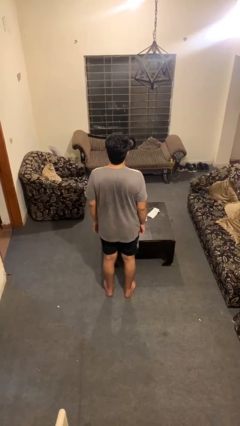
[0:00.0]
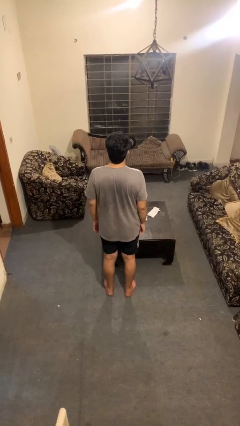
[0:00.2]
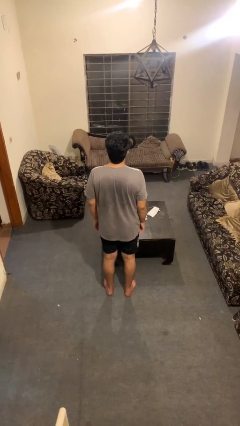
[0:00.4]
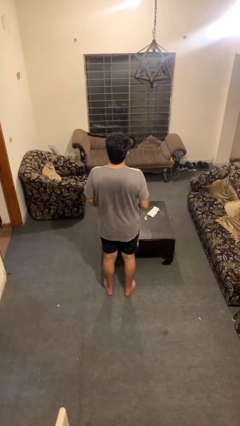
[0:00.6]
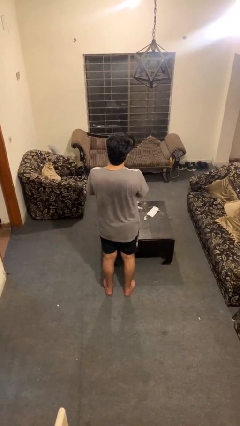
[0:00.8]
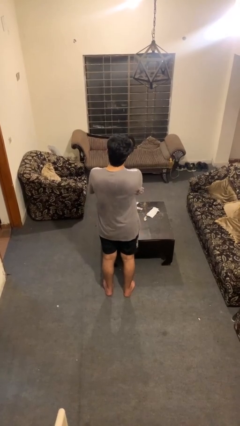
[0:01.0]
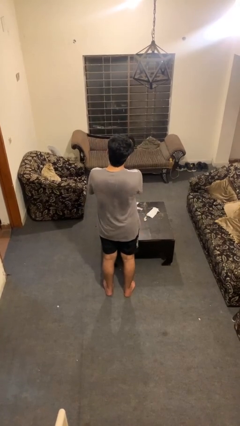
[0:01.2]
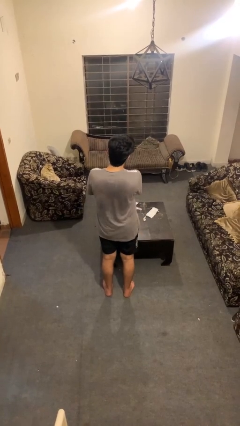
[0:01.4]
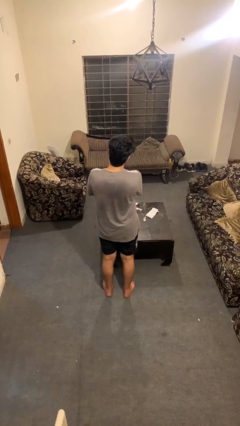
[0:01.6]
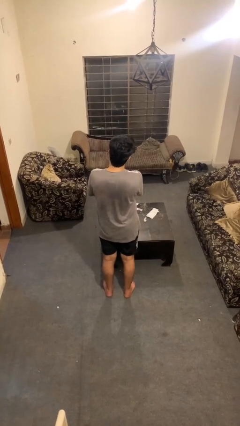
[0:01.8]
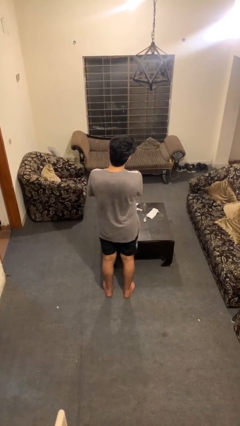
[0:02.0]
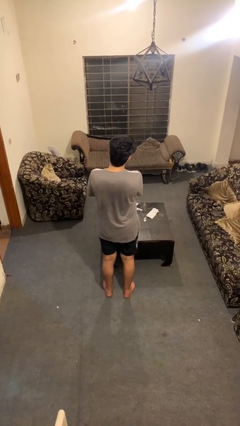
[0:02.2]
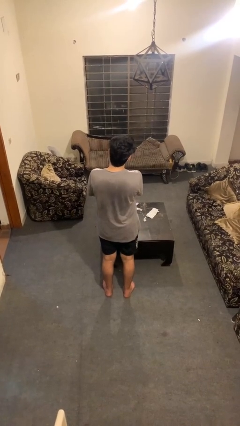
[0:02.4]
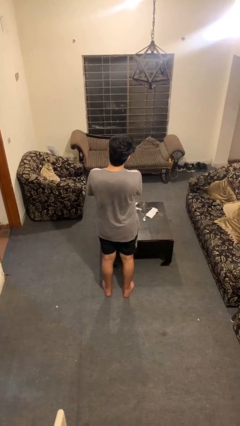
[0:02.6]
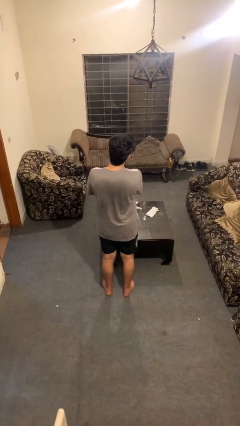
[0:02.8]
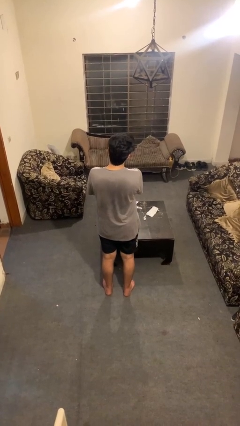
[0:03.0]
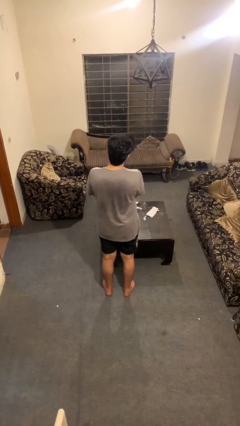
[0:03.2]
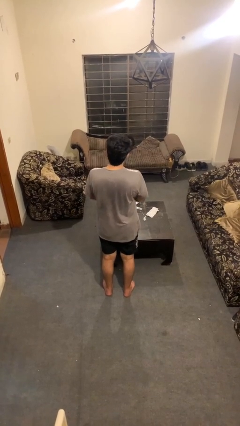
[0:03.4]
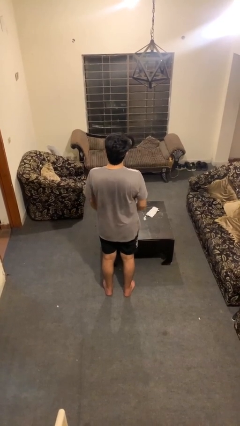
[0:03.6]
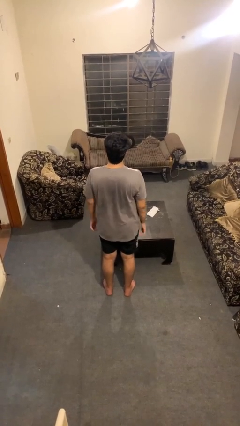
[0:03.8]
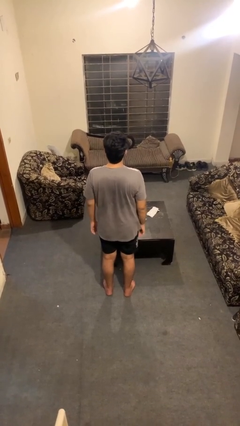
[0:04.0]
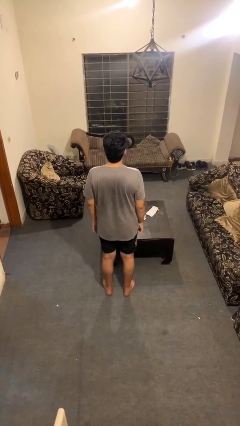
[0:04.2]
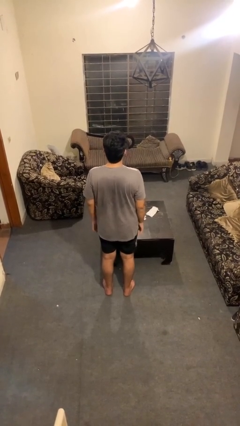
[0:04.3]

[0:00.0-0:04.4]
person strokes chin

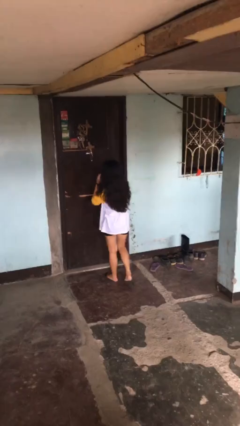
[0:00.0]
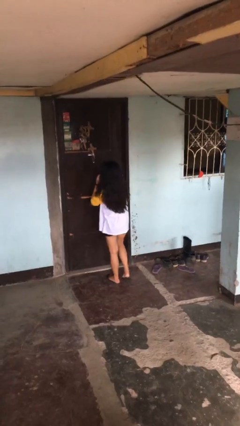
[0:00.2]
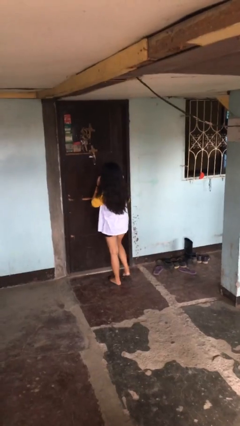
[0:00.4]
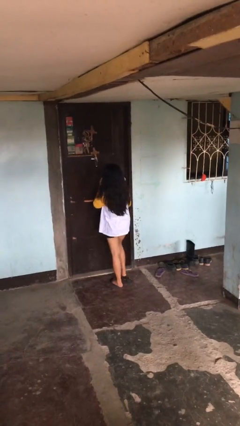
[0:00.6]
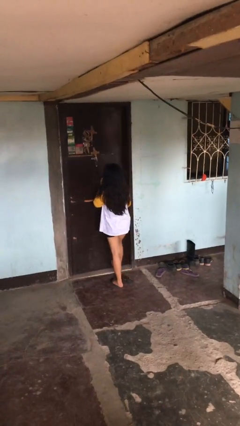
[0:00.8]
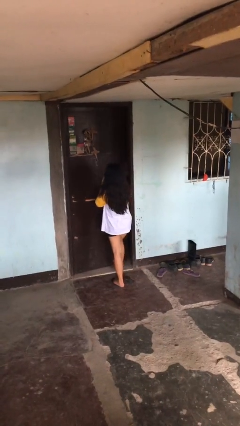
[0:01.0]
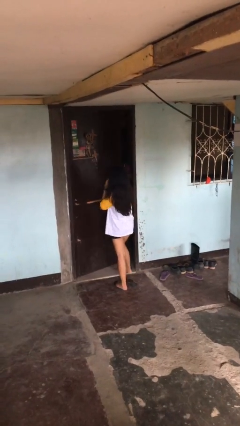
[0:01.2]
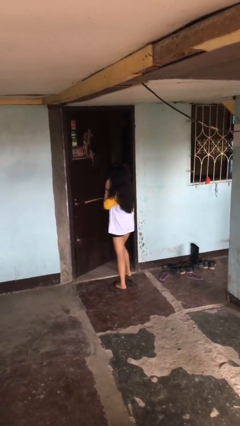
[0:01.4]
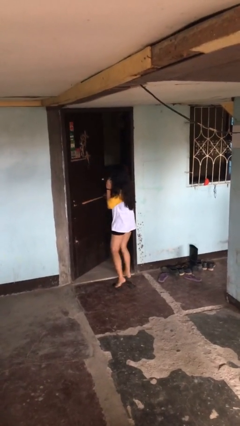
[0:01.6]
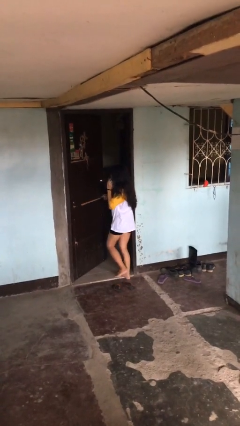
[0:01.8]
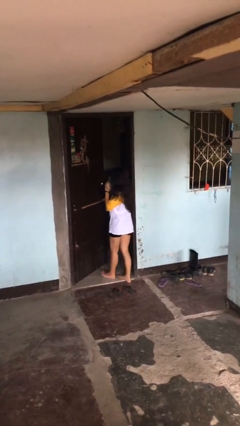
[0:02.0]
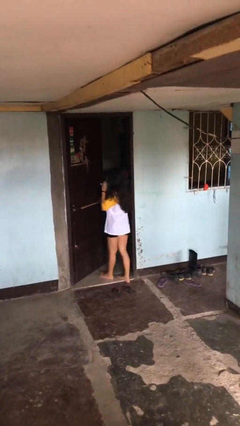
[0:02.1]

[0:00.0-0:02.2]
person opens facility door

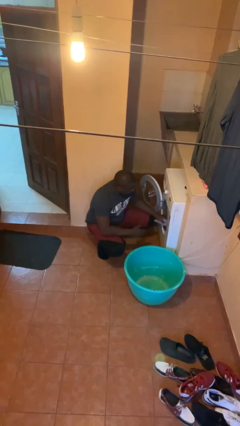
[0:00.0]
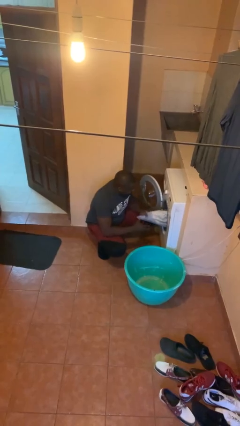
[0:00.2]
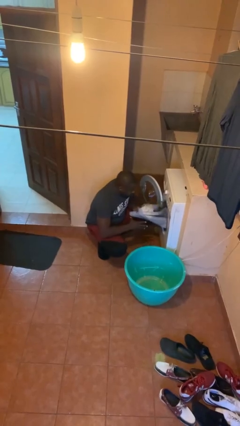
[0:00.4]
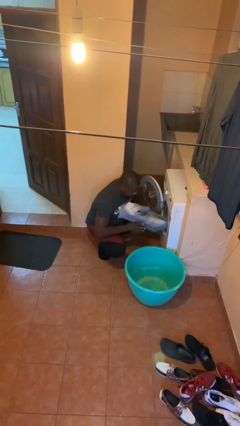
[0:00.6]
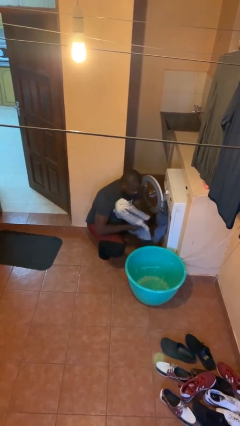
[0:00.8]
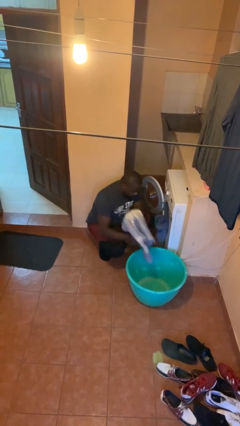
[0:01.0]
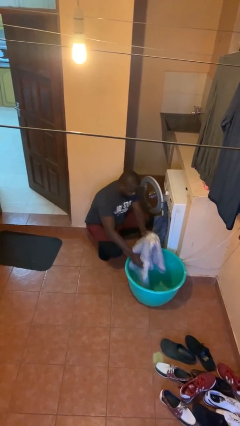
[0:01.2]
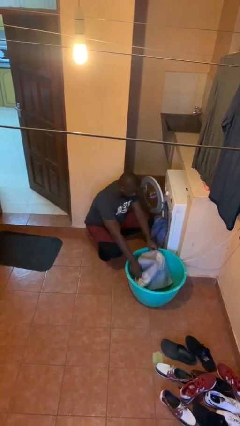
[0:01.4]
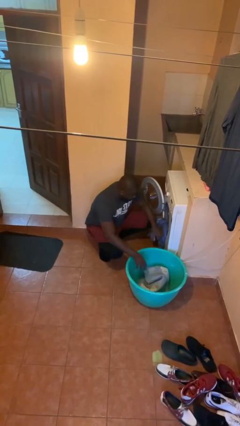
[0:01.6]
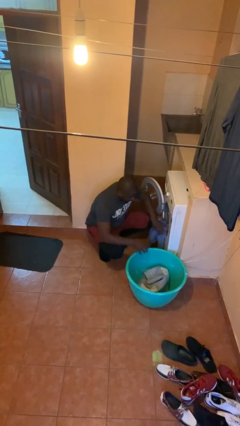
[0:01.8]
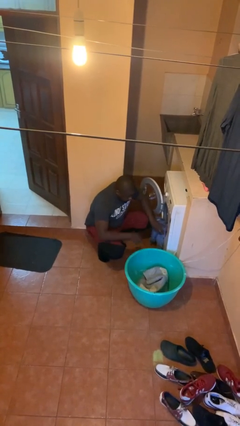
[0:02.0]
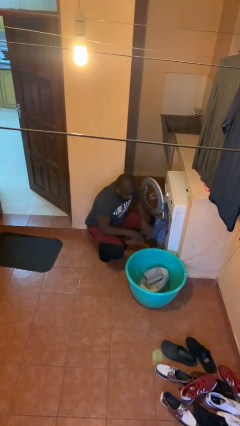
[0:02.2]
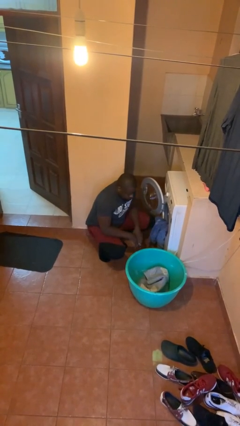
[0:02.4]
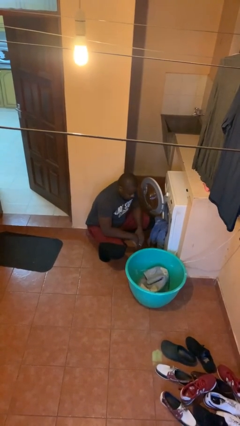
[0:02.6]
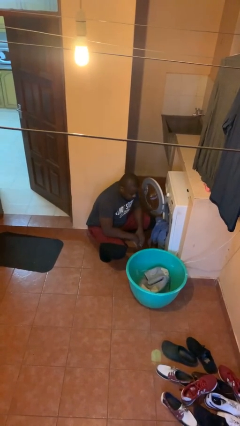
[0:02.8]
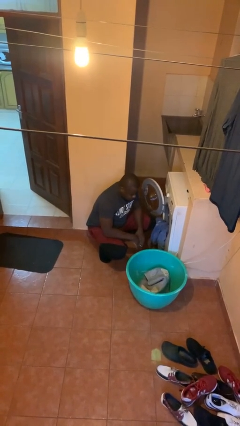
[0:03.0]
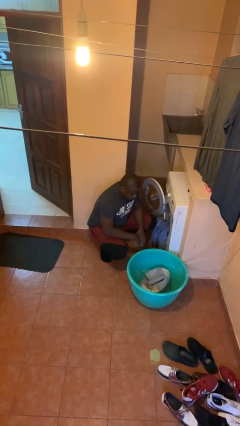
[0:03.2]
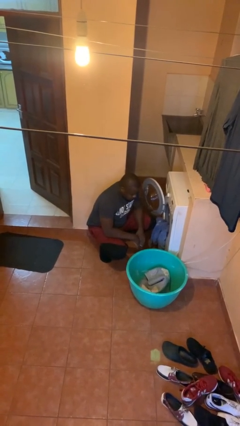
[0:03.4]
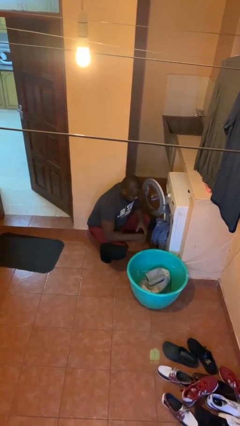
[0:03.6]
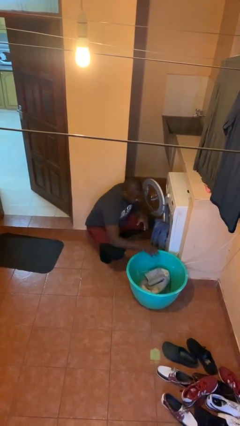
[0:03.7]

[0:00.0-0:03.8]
person unloads clotheswasher

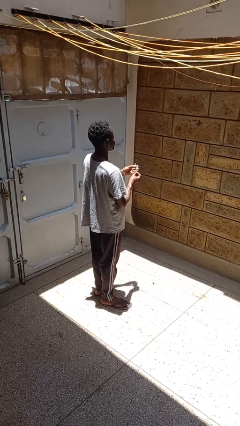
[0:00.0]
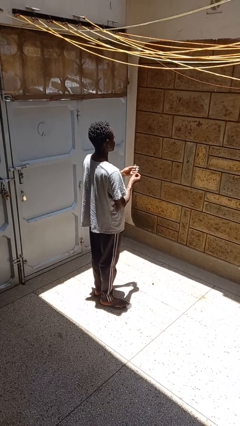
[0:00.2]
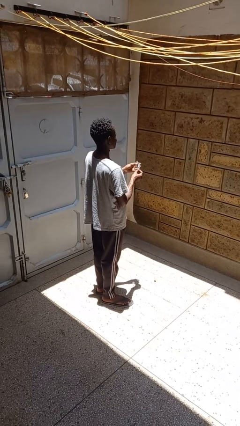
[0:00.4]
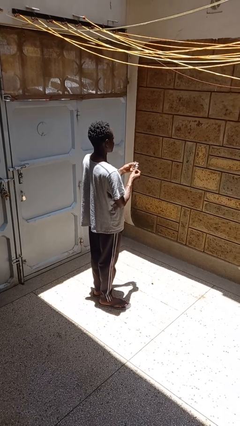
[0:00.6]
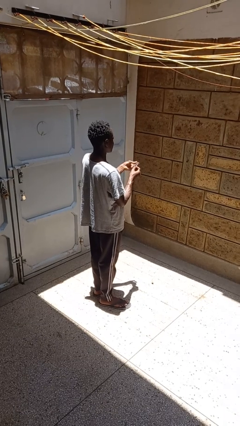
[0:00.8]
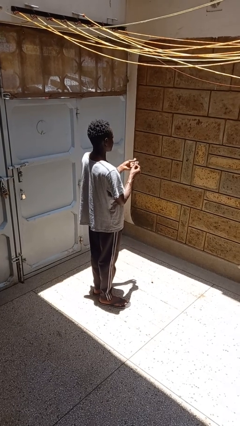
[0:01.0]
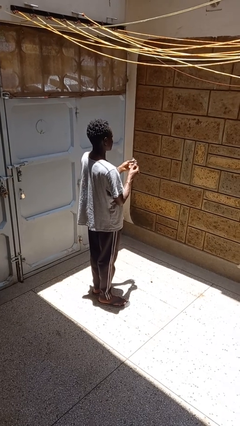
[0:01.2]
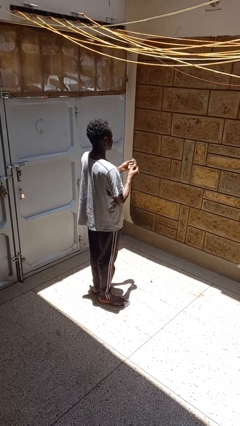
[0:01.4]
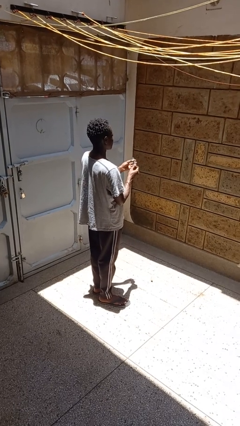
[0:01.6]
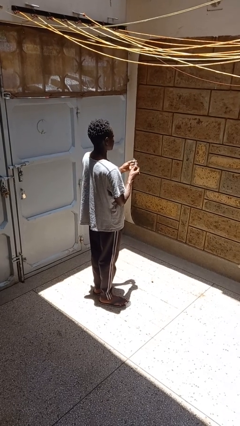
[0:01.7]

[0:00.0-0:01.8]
person clips fingernails

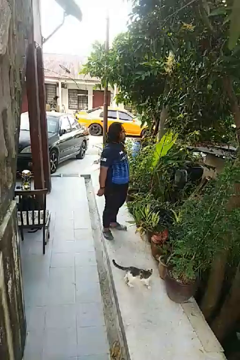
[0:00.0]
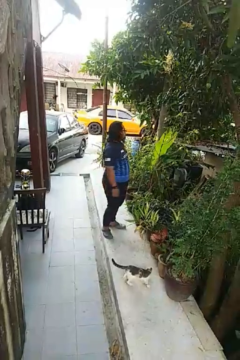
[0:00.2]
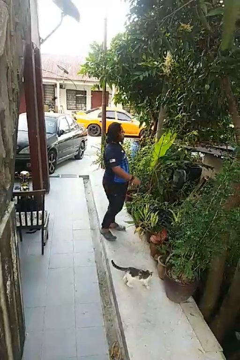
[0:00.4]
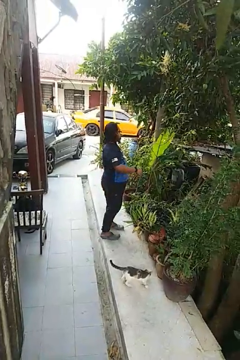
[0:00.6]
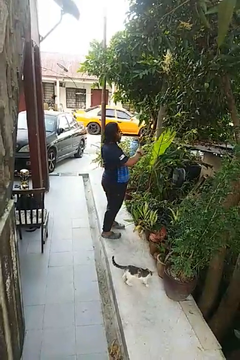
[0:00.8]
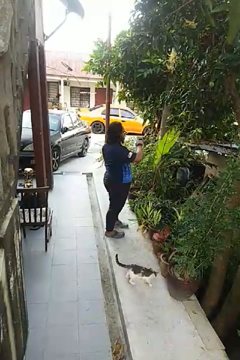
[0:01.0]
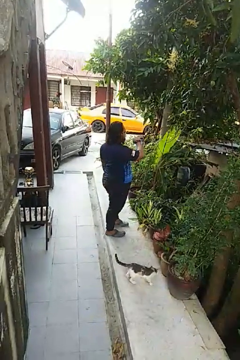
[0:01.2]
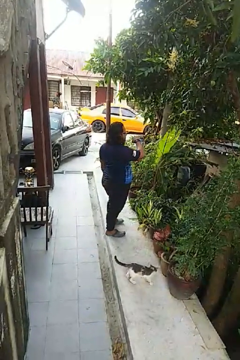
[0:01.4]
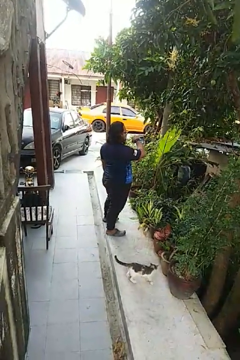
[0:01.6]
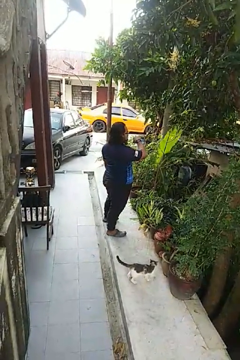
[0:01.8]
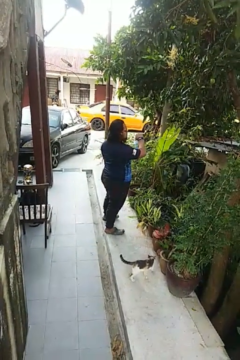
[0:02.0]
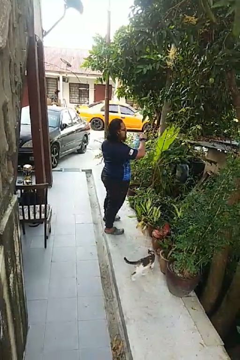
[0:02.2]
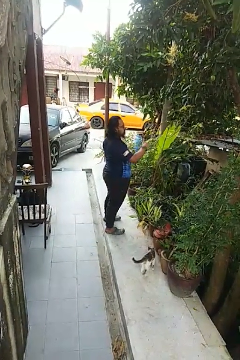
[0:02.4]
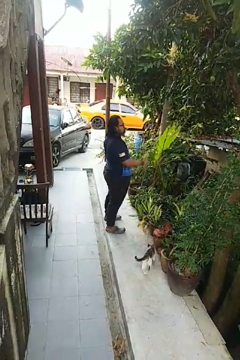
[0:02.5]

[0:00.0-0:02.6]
person looks at wristwatch

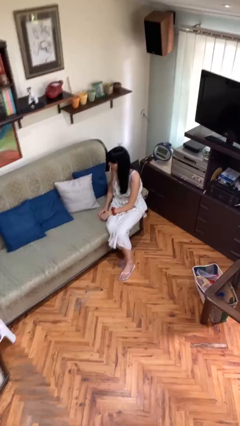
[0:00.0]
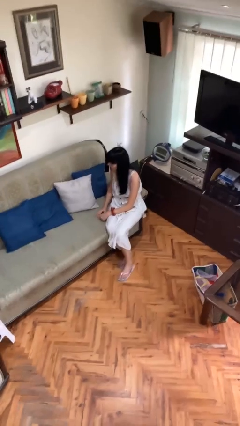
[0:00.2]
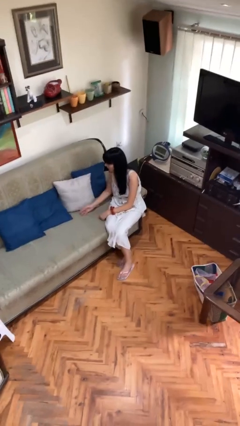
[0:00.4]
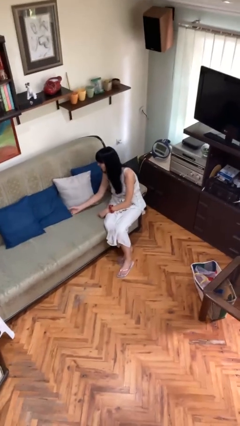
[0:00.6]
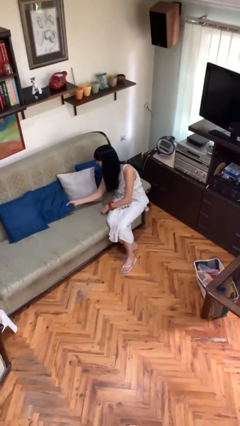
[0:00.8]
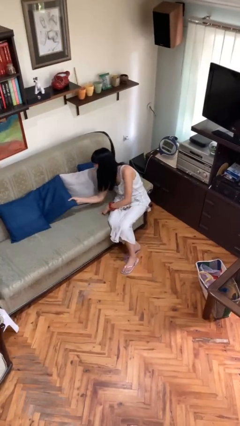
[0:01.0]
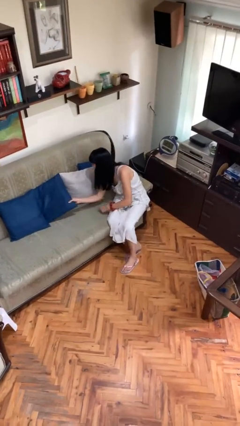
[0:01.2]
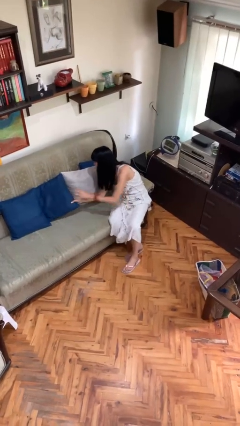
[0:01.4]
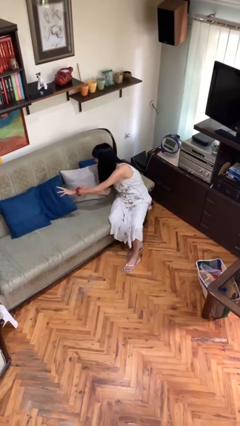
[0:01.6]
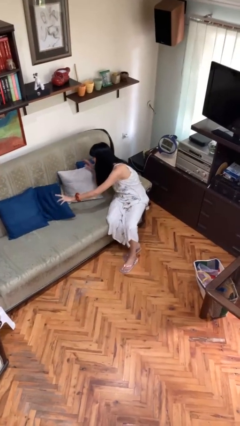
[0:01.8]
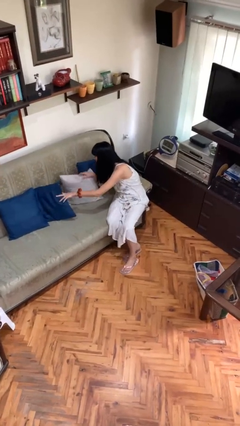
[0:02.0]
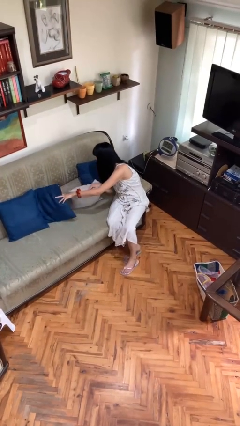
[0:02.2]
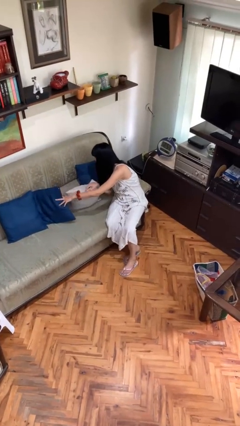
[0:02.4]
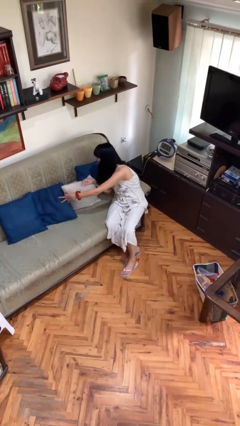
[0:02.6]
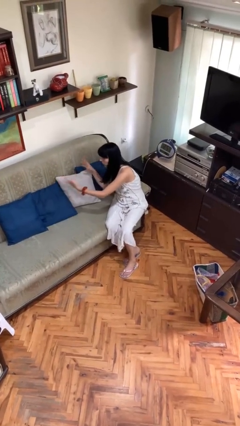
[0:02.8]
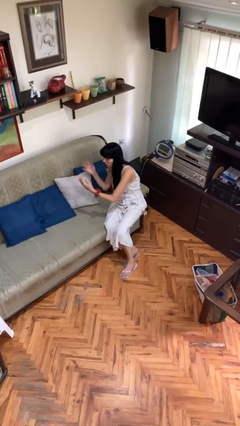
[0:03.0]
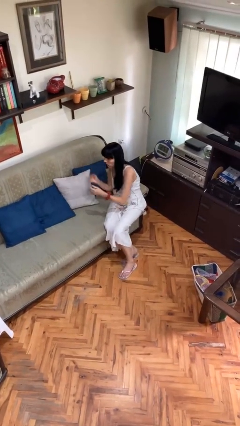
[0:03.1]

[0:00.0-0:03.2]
person searches in couch
